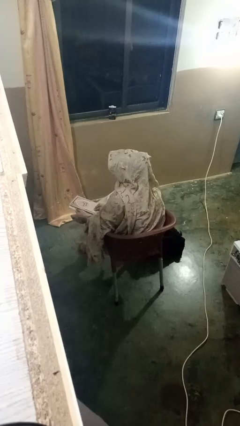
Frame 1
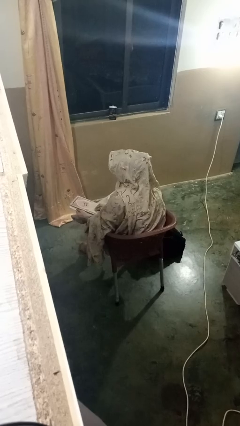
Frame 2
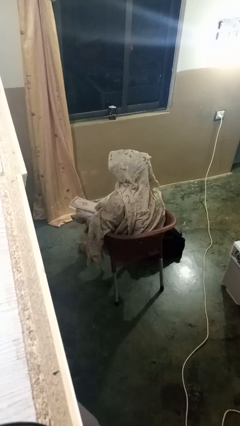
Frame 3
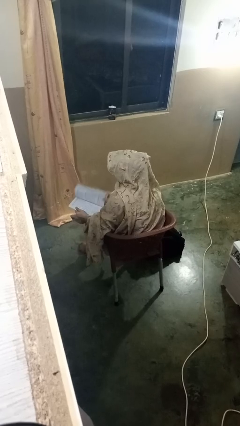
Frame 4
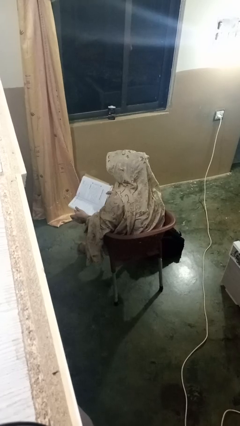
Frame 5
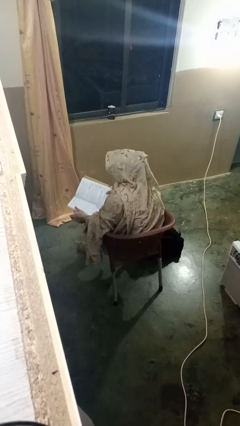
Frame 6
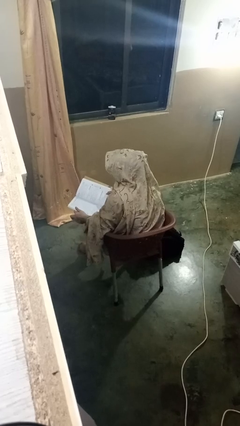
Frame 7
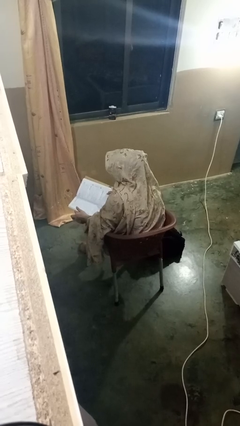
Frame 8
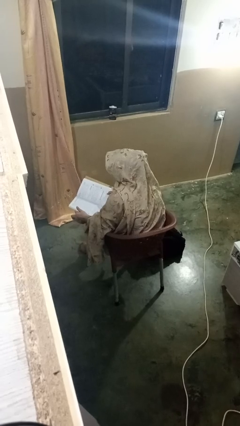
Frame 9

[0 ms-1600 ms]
person reads book

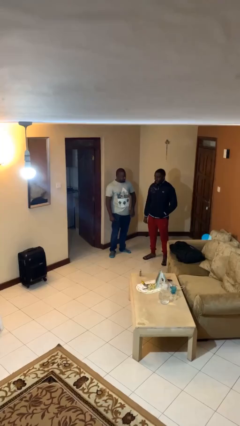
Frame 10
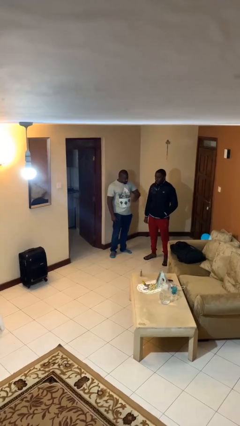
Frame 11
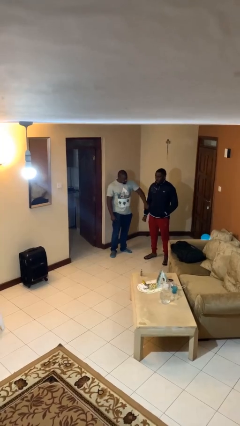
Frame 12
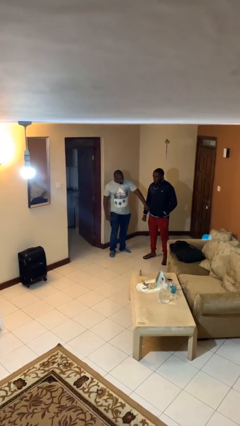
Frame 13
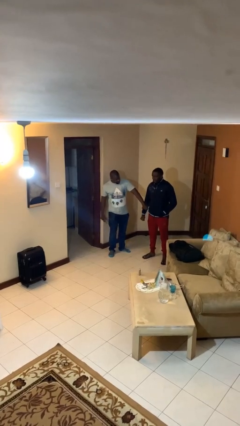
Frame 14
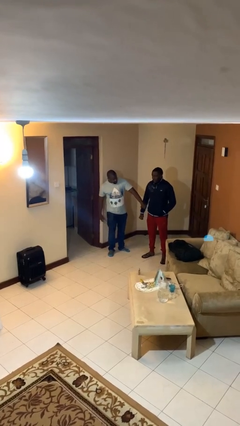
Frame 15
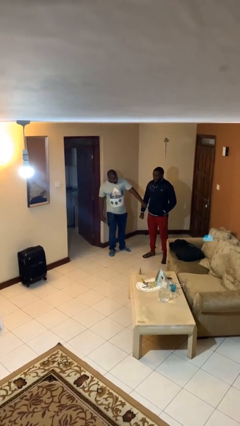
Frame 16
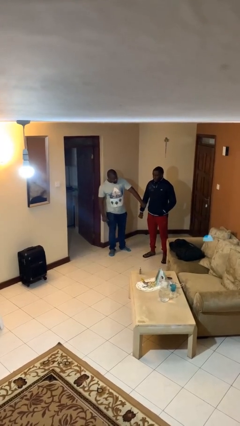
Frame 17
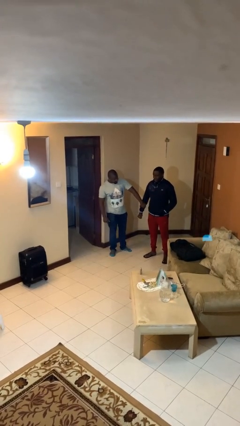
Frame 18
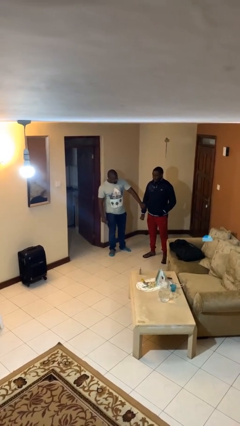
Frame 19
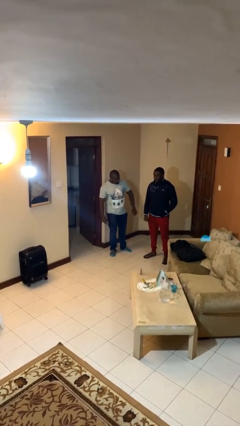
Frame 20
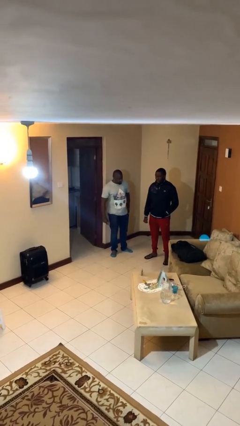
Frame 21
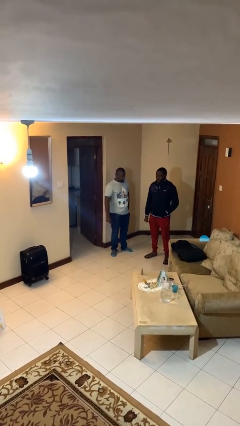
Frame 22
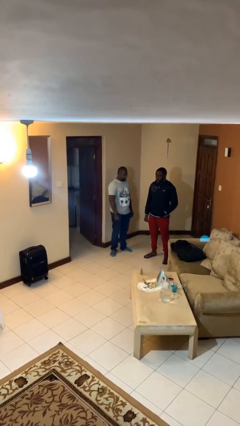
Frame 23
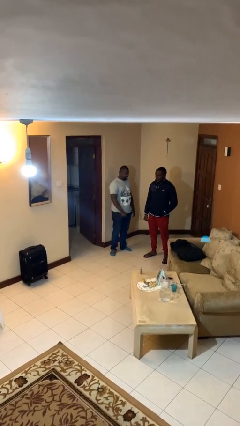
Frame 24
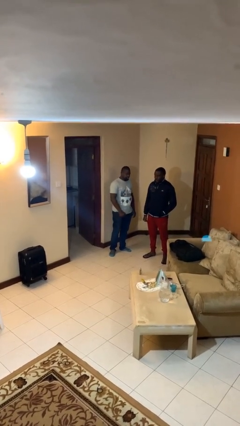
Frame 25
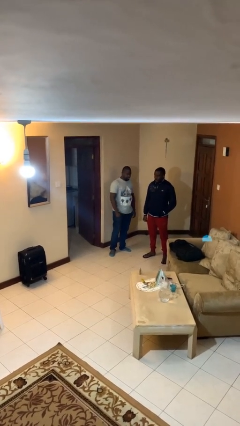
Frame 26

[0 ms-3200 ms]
person grabs person by forearm

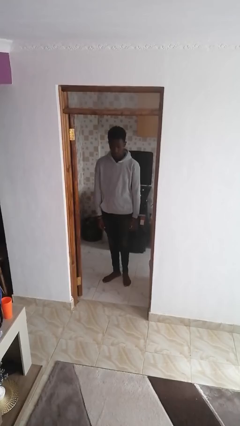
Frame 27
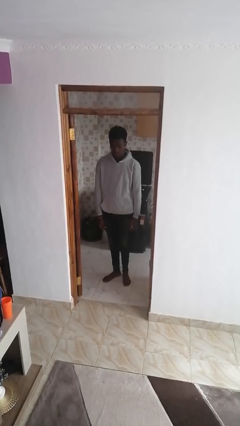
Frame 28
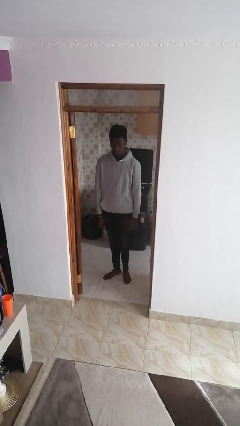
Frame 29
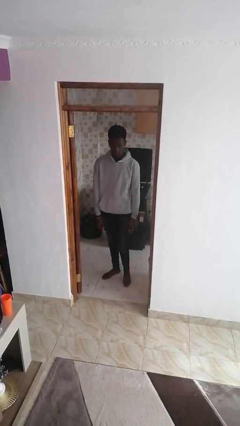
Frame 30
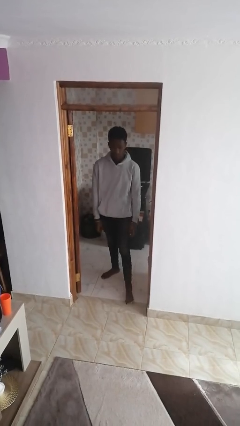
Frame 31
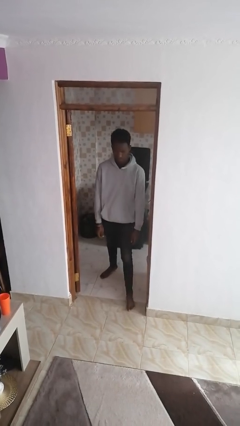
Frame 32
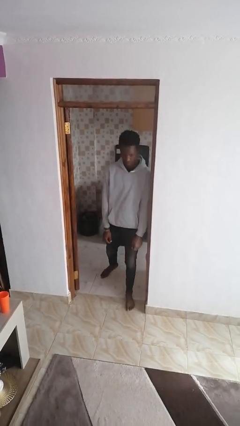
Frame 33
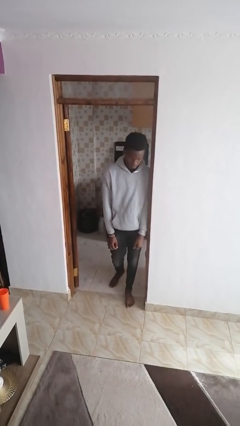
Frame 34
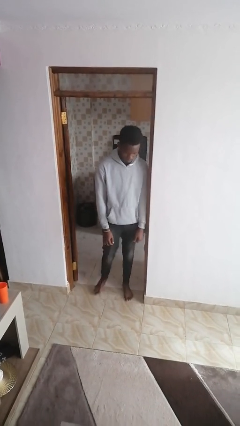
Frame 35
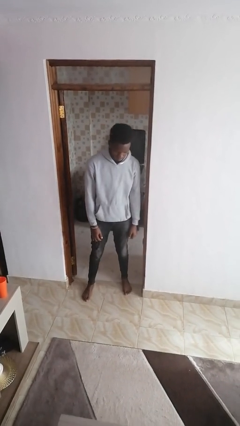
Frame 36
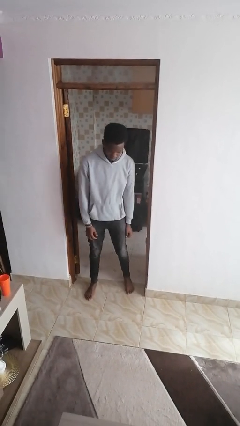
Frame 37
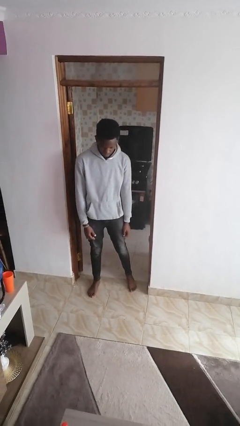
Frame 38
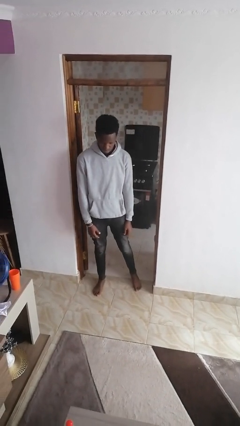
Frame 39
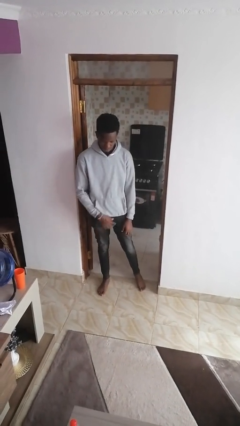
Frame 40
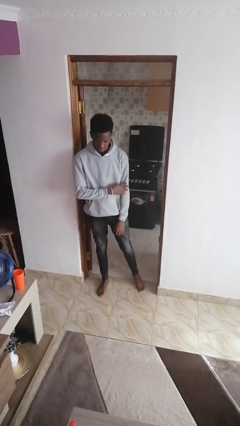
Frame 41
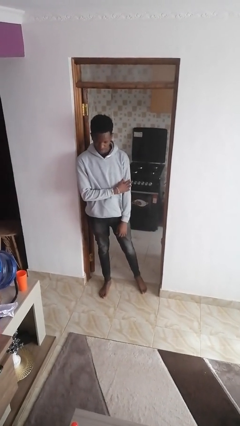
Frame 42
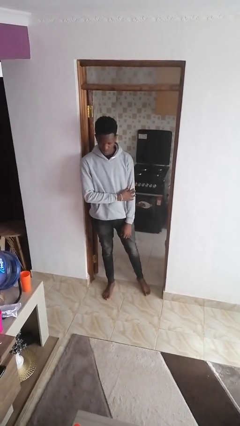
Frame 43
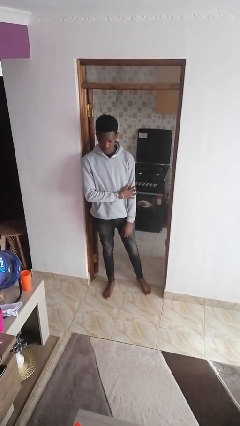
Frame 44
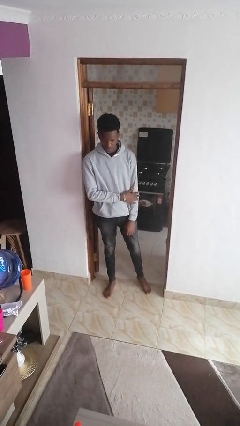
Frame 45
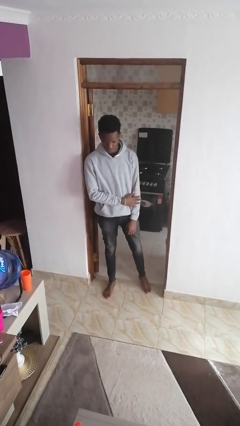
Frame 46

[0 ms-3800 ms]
person bumps into wall

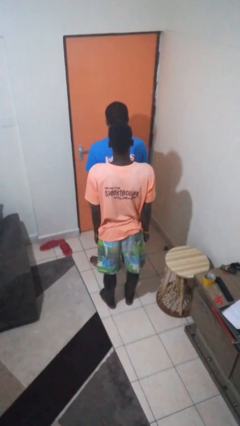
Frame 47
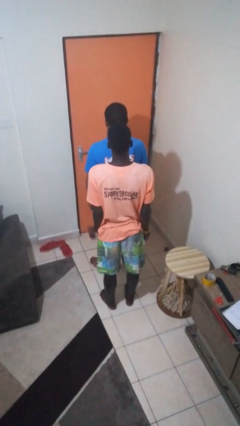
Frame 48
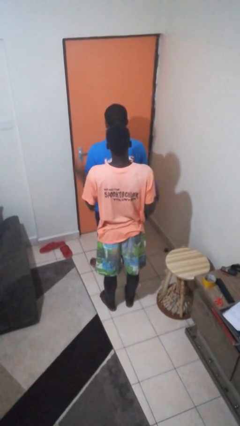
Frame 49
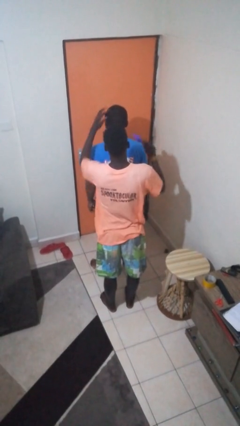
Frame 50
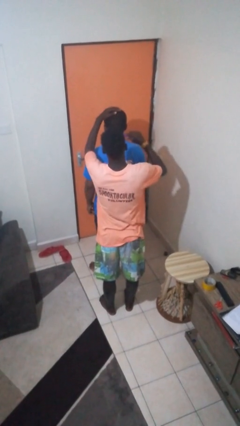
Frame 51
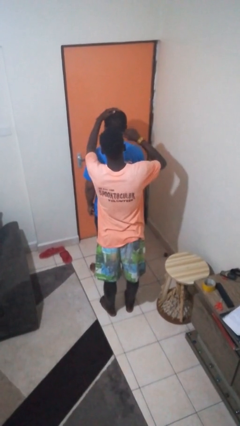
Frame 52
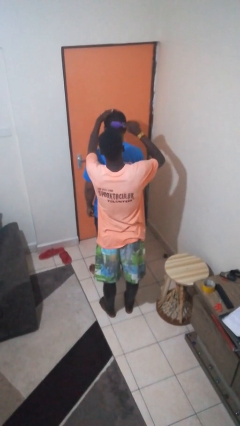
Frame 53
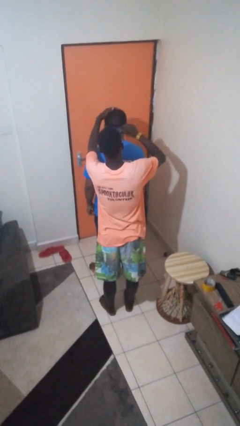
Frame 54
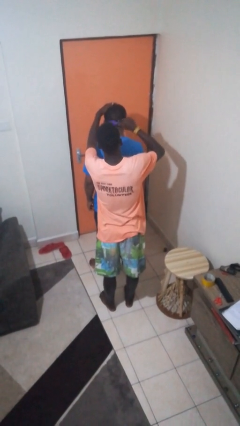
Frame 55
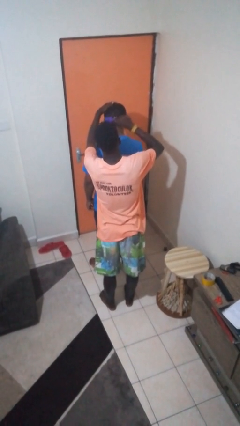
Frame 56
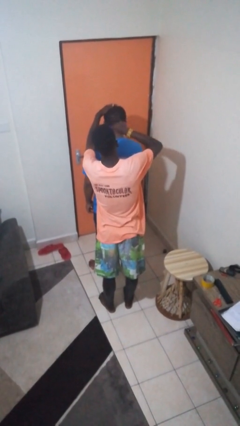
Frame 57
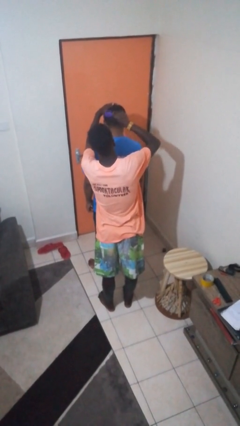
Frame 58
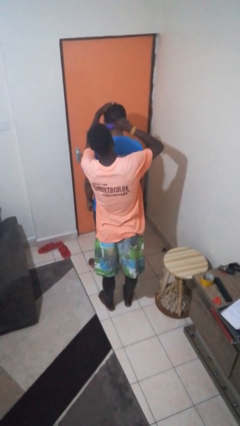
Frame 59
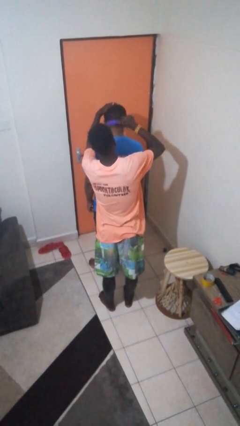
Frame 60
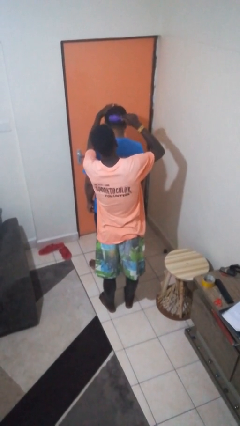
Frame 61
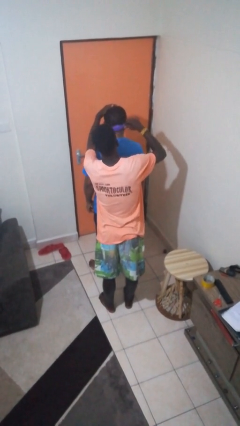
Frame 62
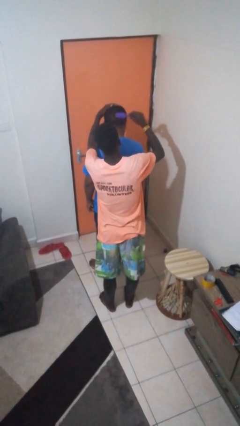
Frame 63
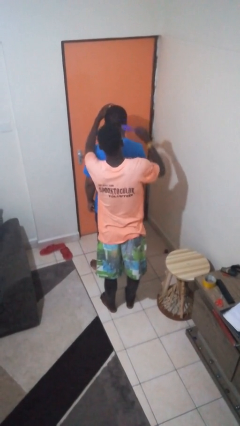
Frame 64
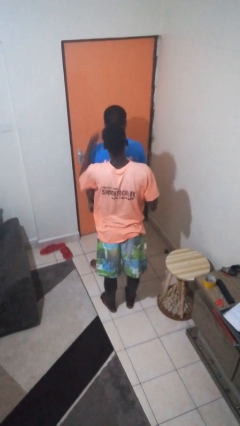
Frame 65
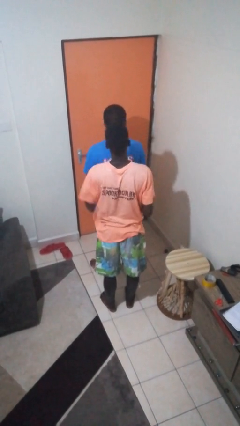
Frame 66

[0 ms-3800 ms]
person brushes hair of person

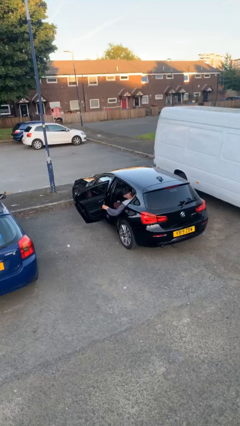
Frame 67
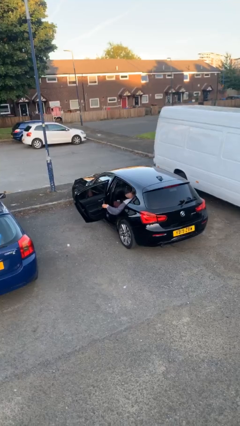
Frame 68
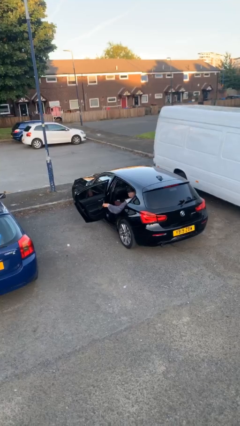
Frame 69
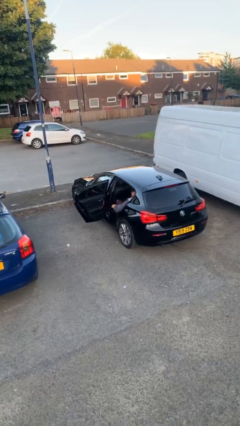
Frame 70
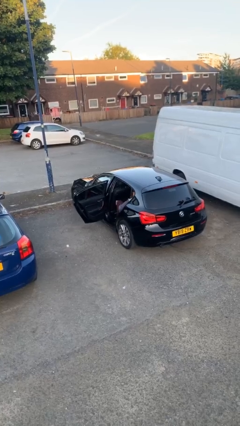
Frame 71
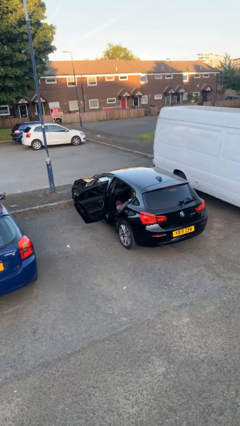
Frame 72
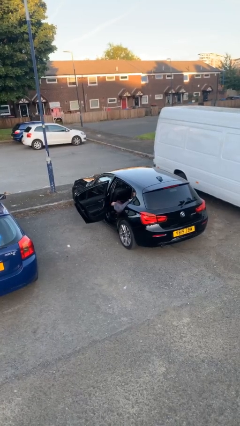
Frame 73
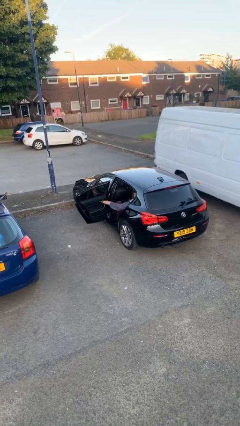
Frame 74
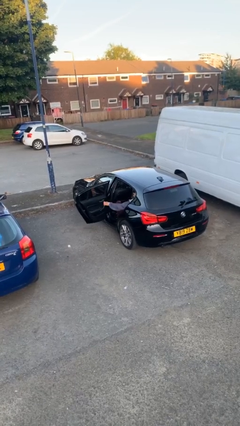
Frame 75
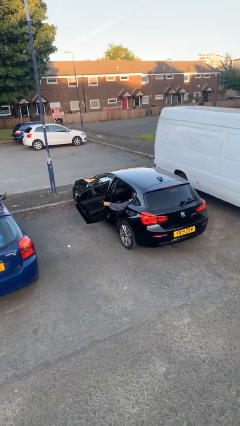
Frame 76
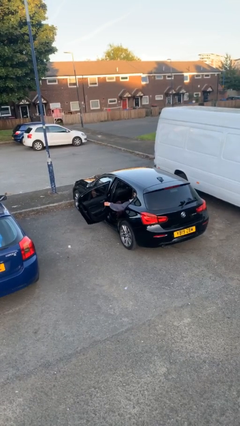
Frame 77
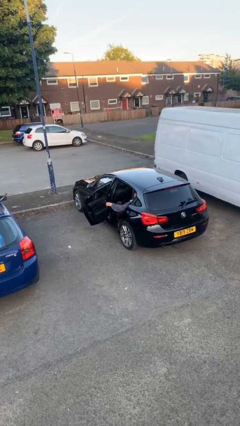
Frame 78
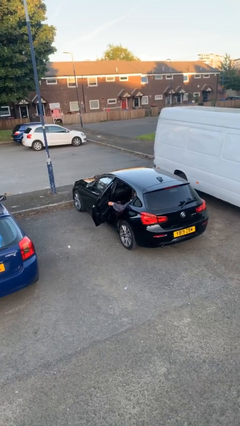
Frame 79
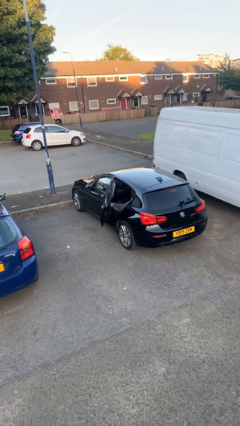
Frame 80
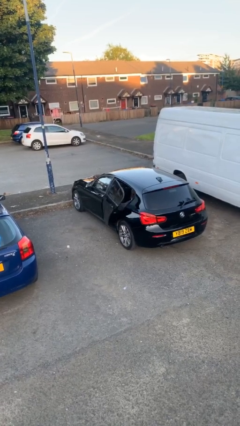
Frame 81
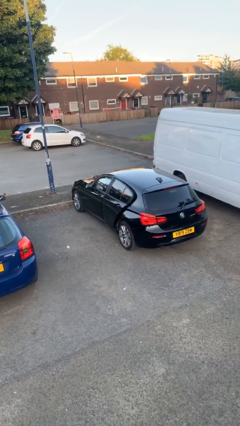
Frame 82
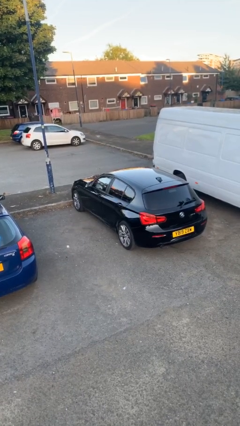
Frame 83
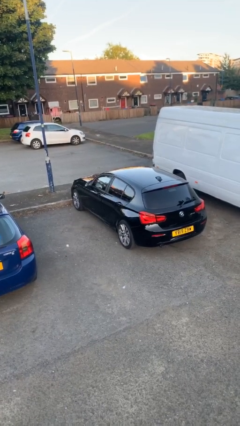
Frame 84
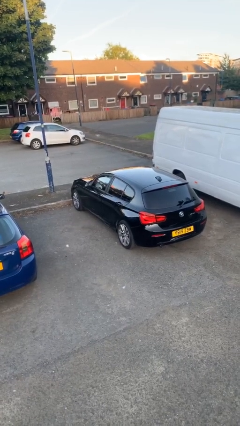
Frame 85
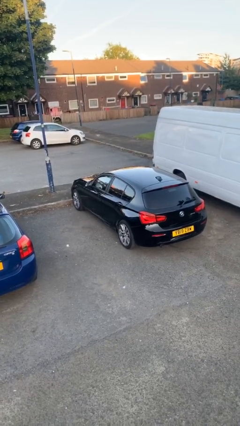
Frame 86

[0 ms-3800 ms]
person closes car door

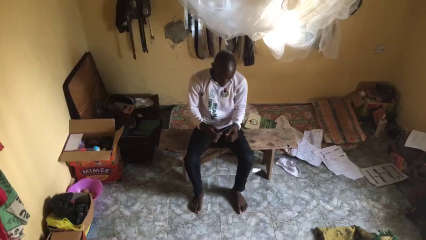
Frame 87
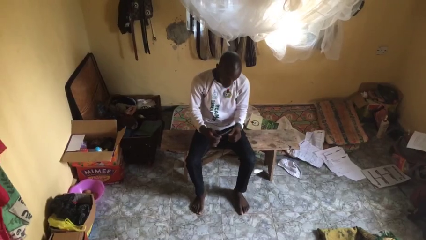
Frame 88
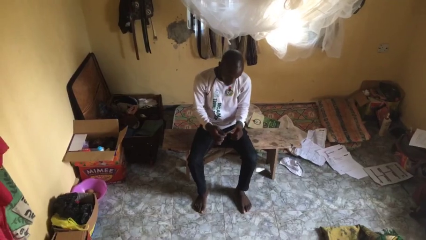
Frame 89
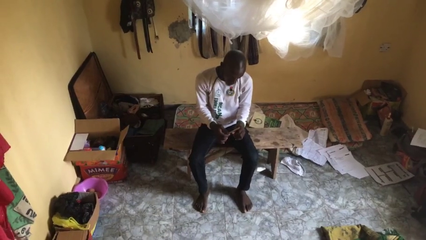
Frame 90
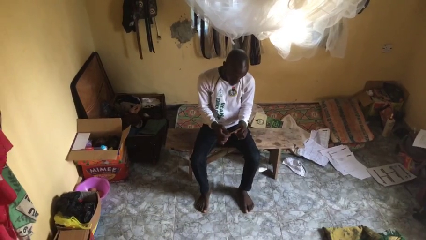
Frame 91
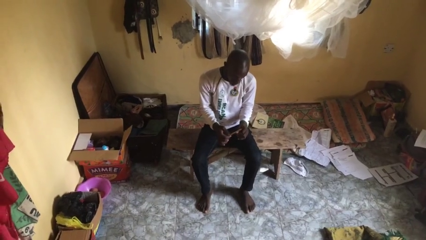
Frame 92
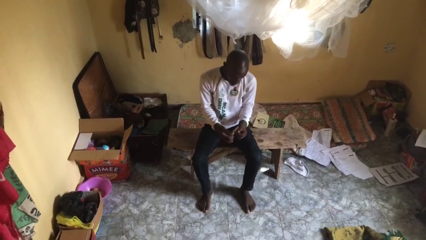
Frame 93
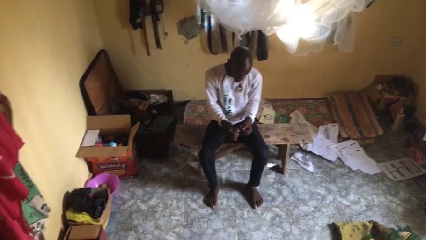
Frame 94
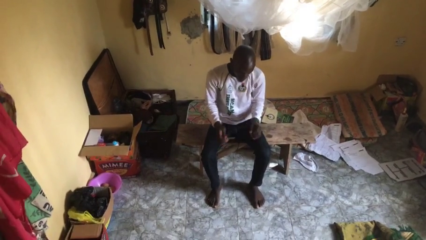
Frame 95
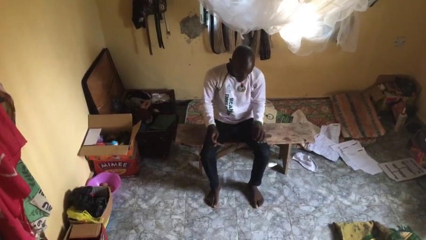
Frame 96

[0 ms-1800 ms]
person files fingernails
